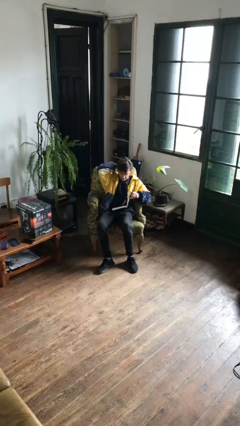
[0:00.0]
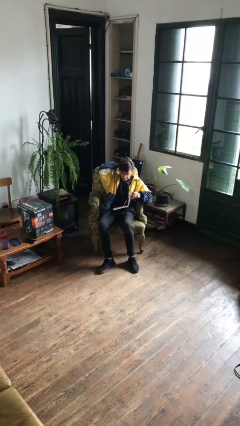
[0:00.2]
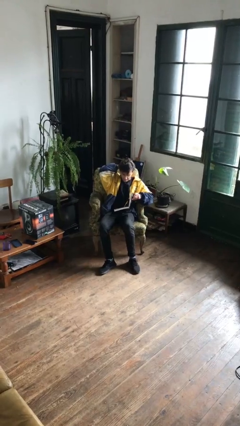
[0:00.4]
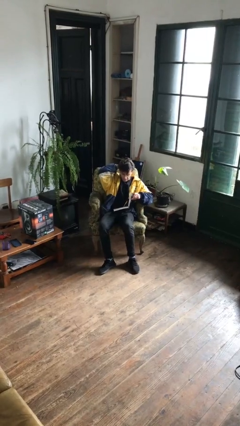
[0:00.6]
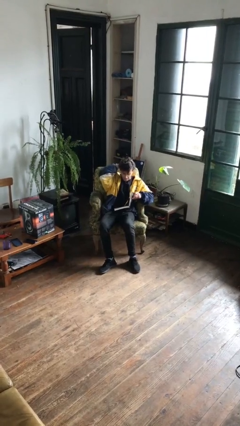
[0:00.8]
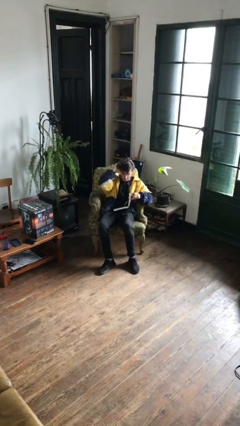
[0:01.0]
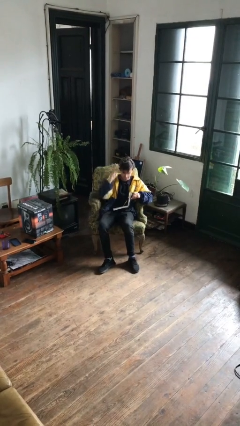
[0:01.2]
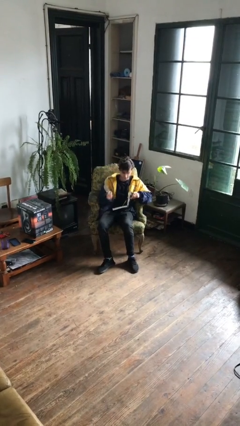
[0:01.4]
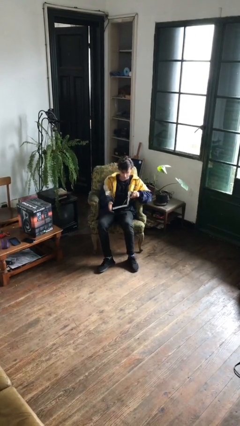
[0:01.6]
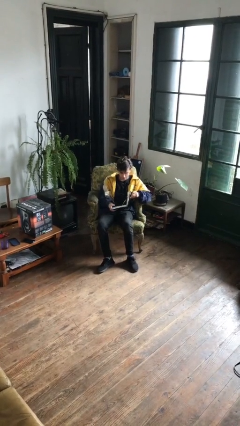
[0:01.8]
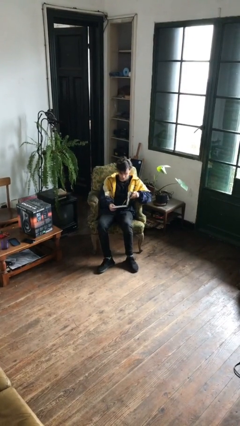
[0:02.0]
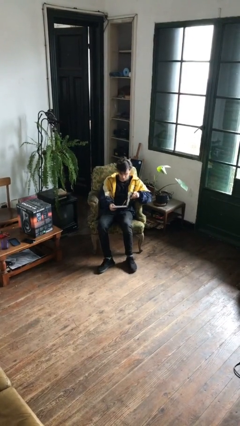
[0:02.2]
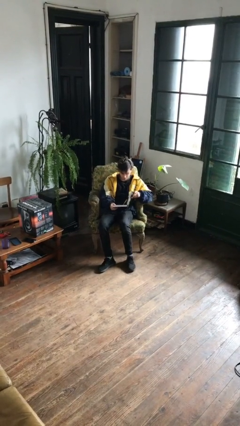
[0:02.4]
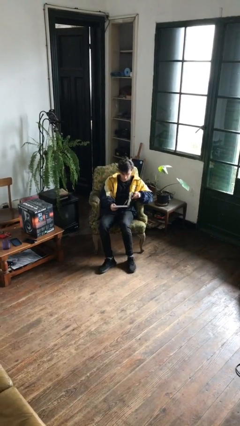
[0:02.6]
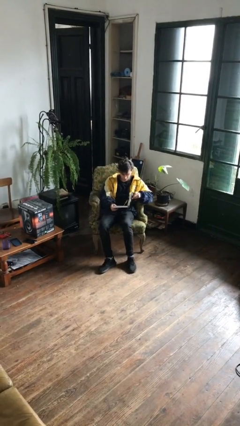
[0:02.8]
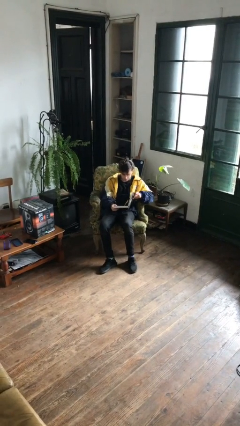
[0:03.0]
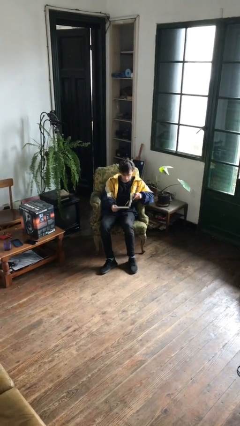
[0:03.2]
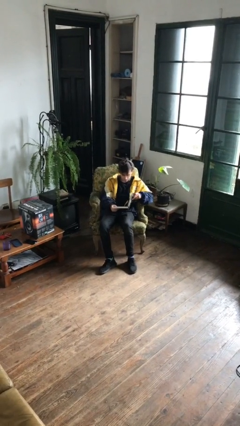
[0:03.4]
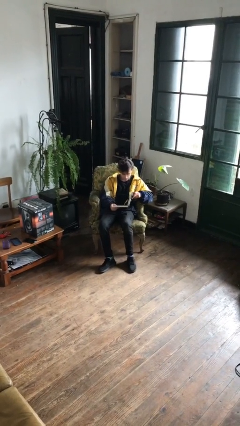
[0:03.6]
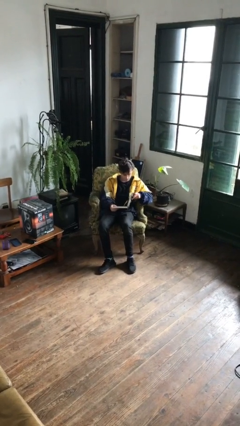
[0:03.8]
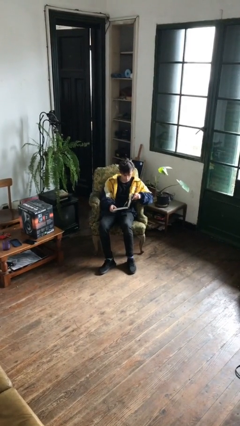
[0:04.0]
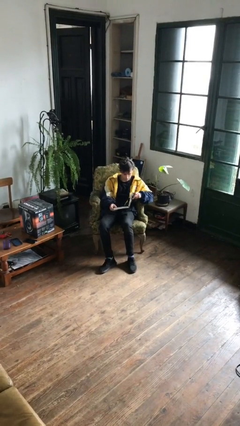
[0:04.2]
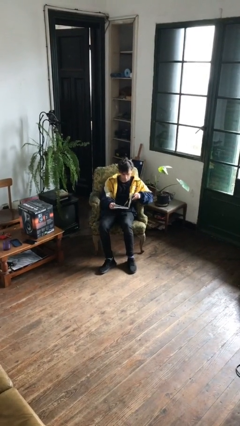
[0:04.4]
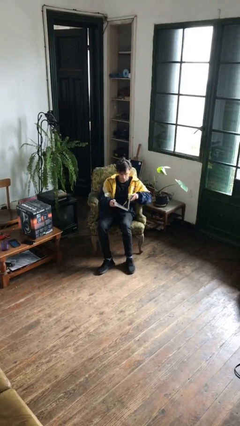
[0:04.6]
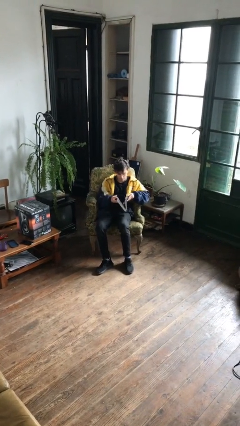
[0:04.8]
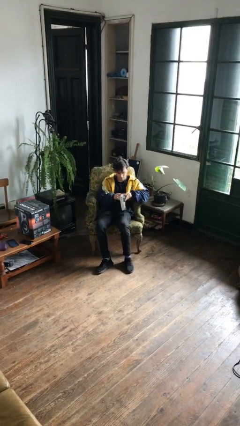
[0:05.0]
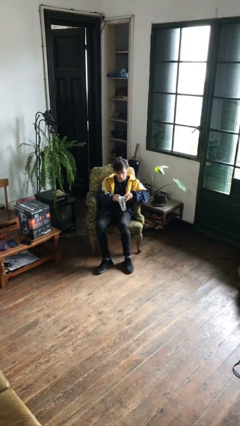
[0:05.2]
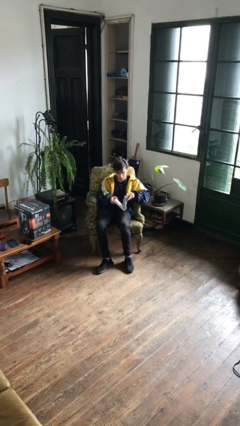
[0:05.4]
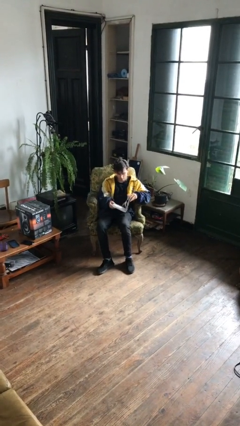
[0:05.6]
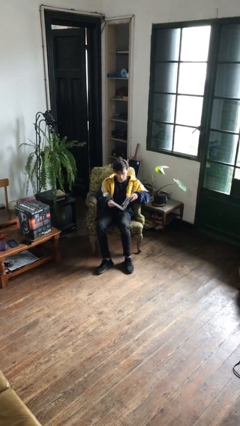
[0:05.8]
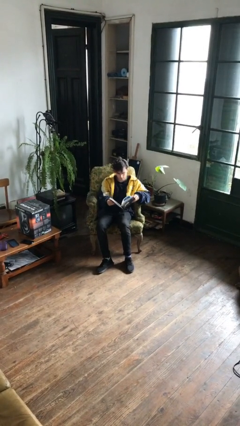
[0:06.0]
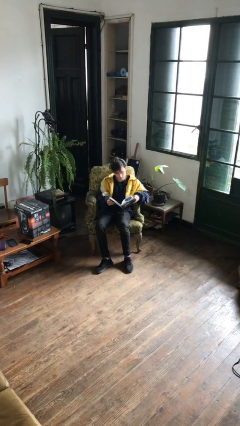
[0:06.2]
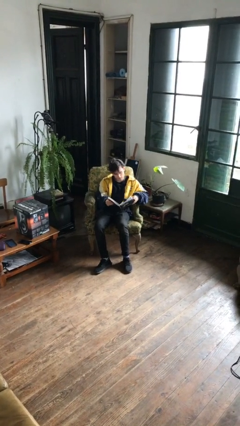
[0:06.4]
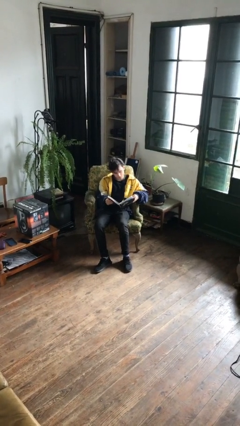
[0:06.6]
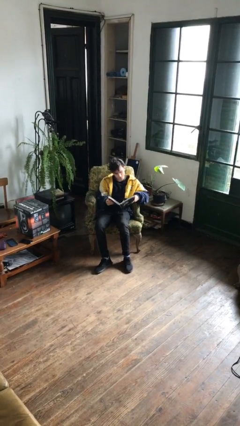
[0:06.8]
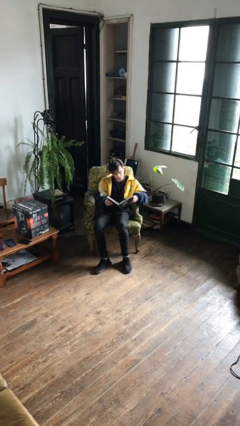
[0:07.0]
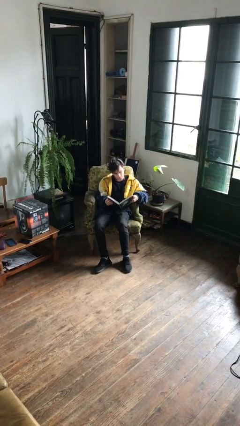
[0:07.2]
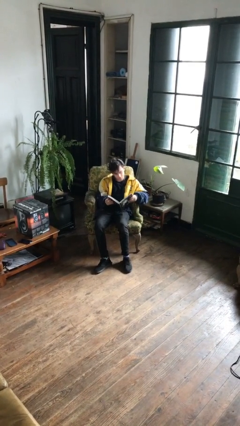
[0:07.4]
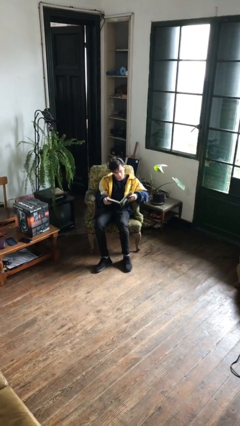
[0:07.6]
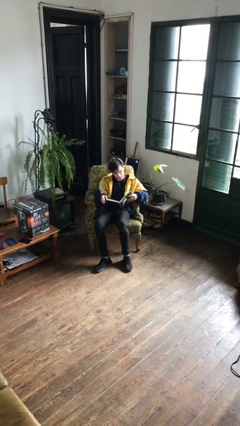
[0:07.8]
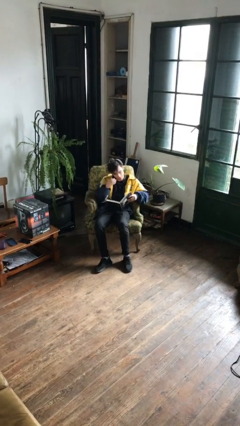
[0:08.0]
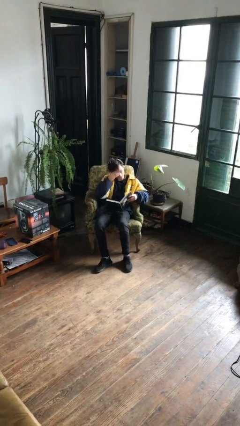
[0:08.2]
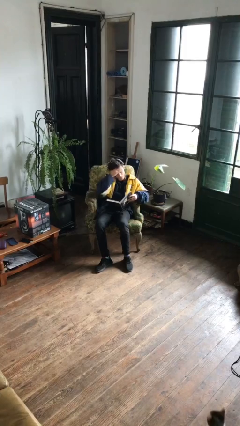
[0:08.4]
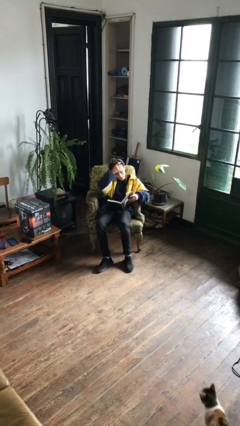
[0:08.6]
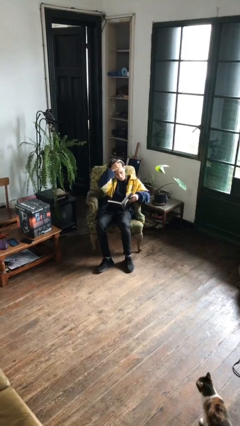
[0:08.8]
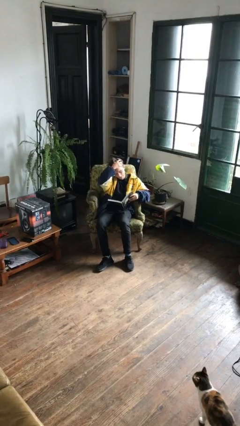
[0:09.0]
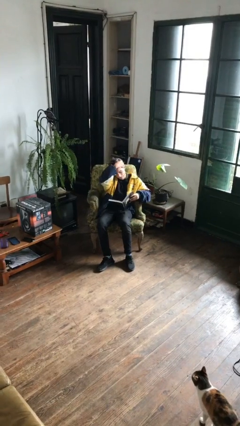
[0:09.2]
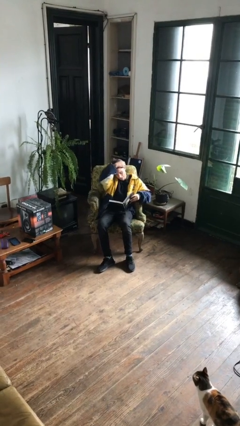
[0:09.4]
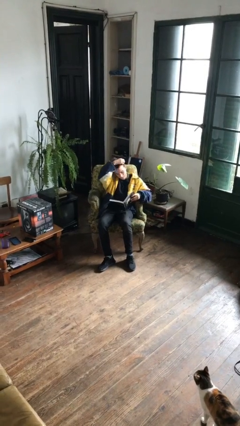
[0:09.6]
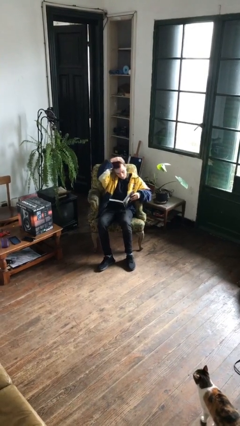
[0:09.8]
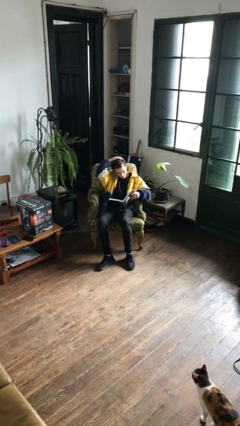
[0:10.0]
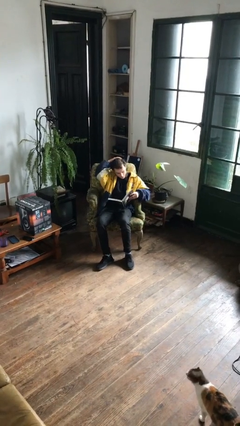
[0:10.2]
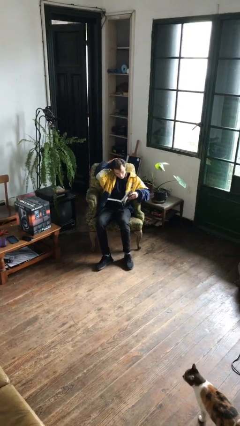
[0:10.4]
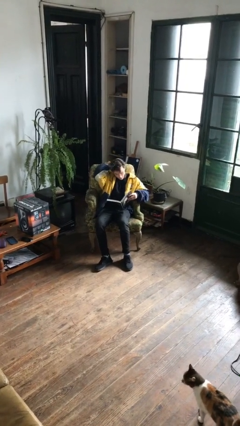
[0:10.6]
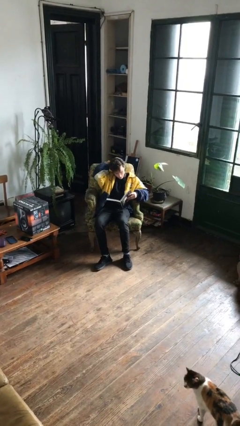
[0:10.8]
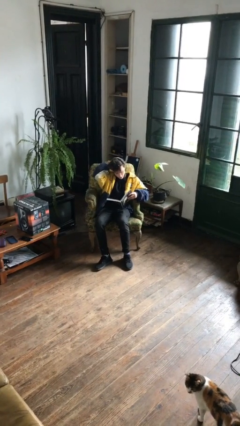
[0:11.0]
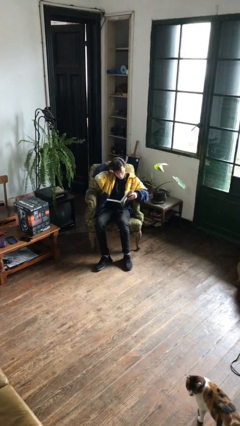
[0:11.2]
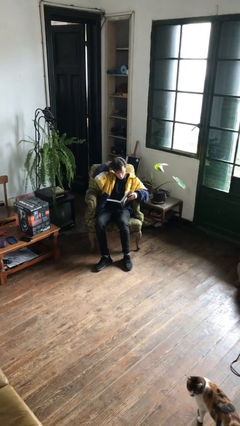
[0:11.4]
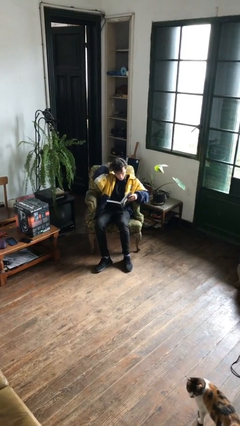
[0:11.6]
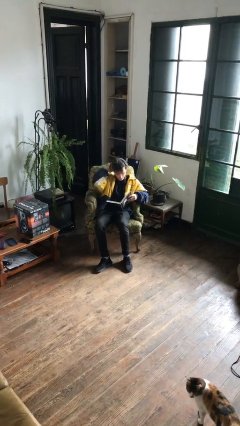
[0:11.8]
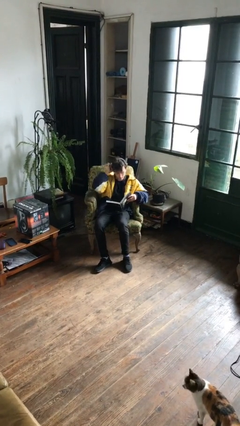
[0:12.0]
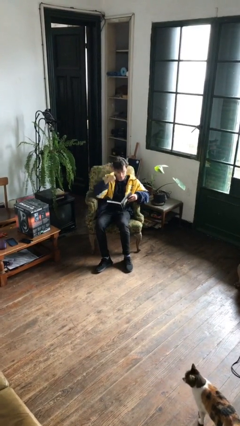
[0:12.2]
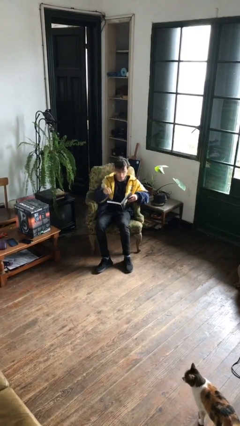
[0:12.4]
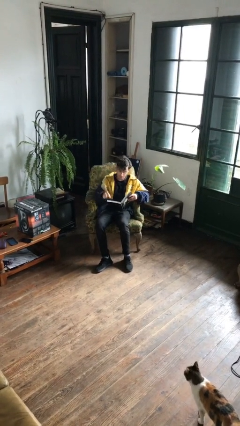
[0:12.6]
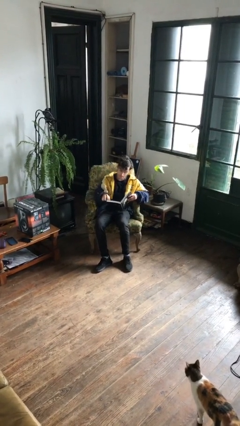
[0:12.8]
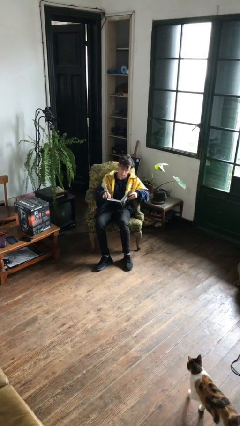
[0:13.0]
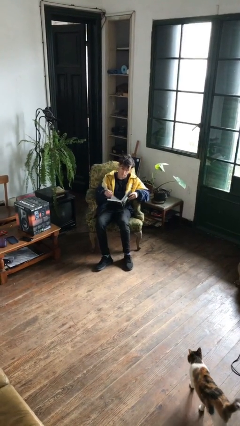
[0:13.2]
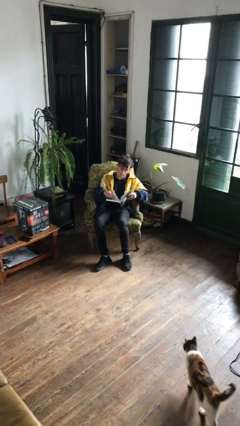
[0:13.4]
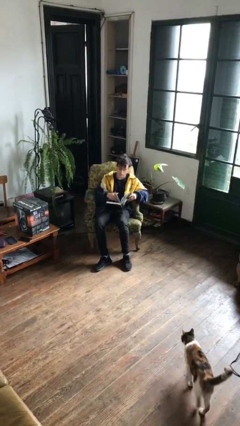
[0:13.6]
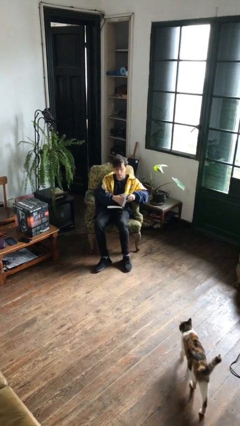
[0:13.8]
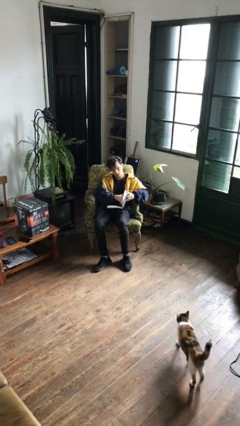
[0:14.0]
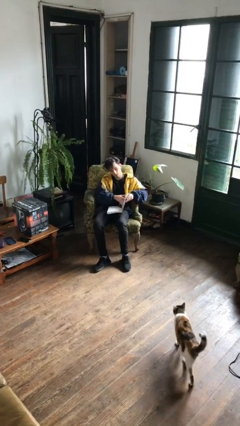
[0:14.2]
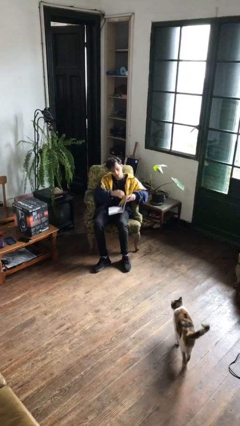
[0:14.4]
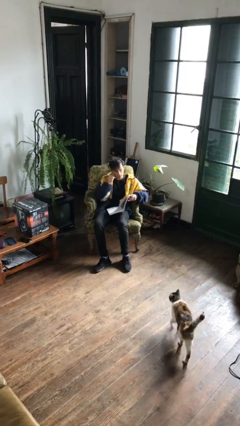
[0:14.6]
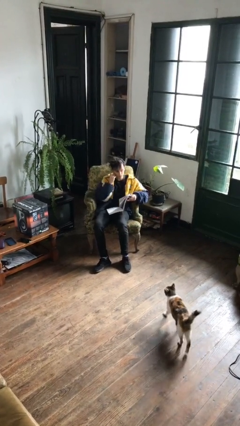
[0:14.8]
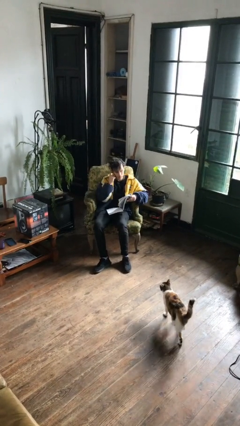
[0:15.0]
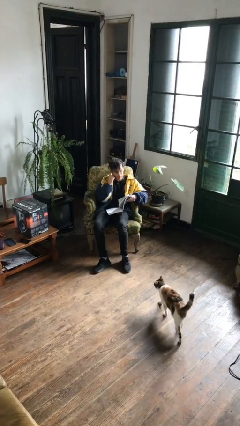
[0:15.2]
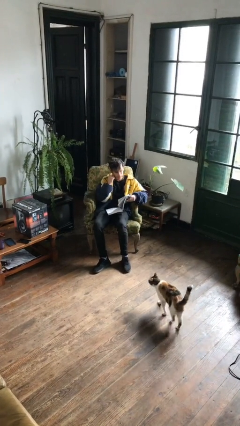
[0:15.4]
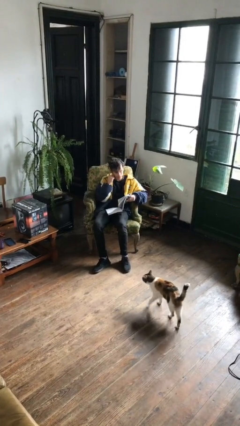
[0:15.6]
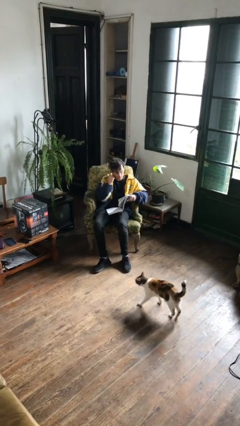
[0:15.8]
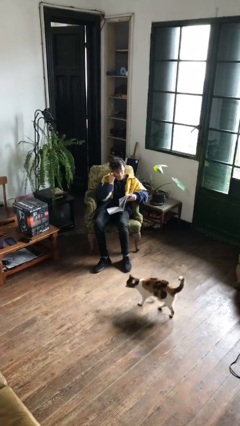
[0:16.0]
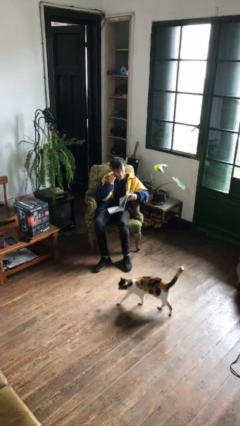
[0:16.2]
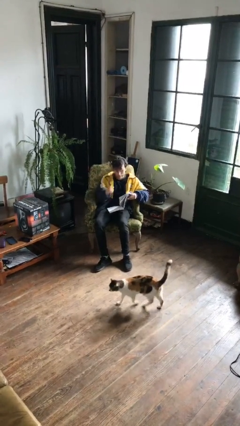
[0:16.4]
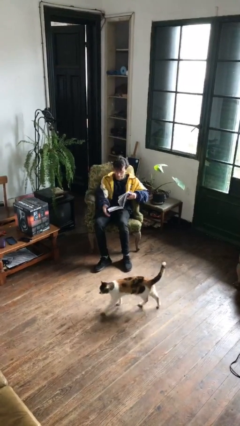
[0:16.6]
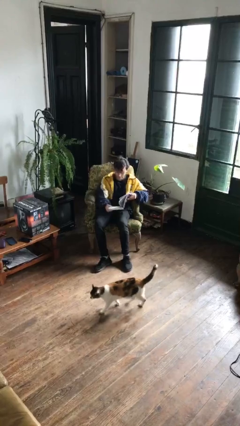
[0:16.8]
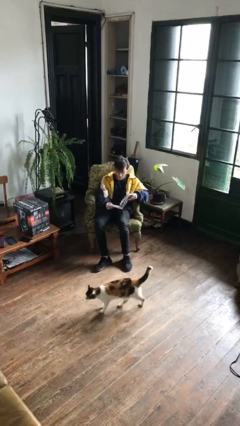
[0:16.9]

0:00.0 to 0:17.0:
person reads document

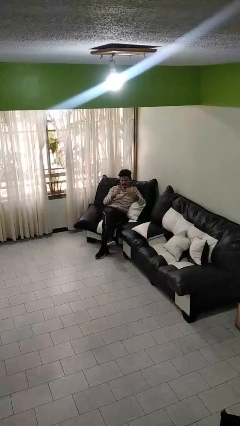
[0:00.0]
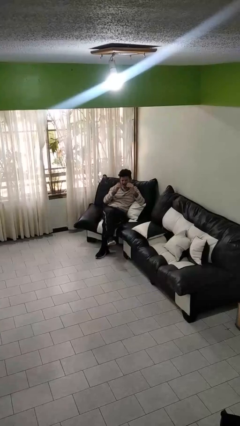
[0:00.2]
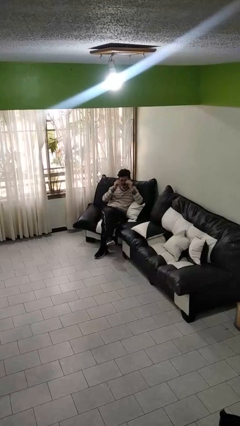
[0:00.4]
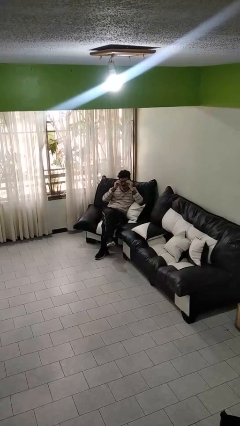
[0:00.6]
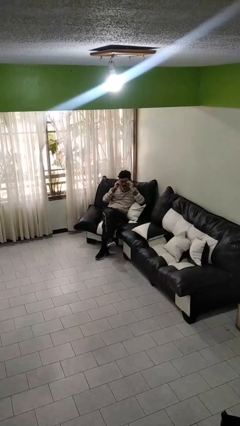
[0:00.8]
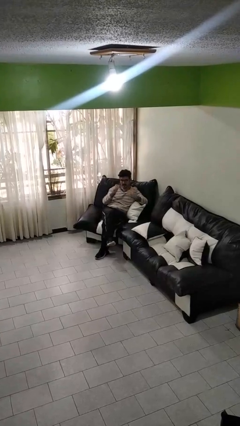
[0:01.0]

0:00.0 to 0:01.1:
person puts on glasses
